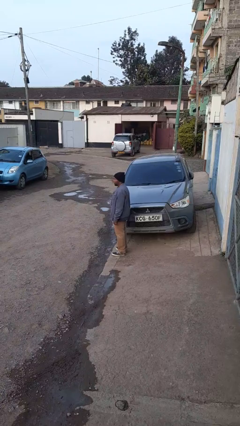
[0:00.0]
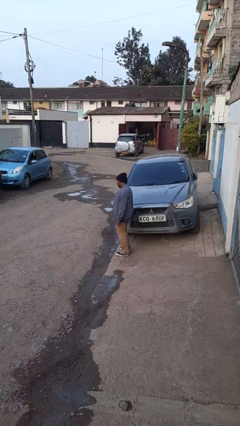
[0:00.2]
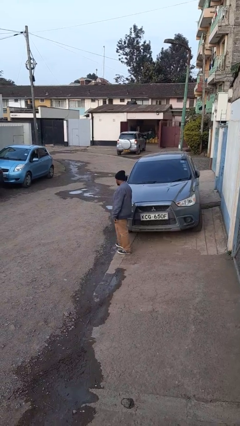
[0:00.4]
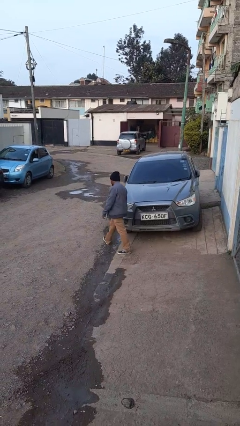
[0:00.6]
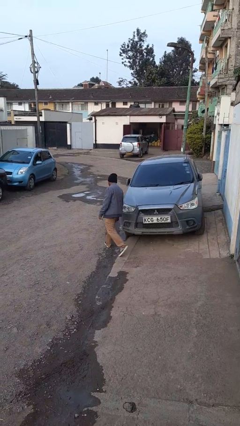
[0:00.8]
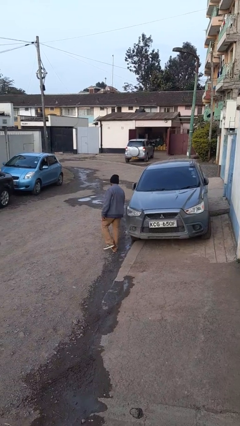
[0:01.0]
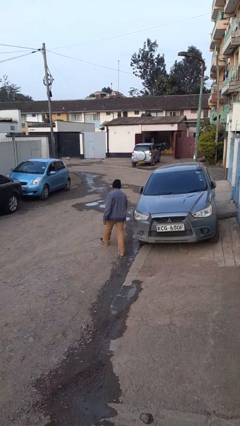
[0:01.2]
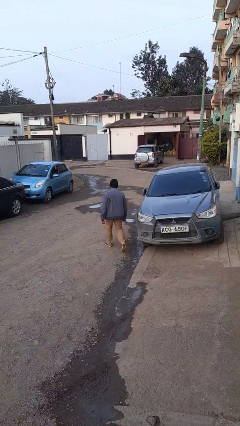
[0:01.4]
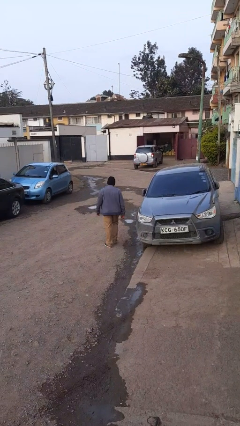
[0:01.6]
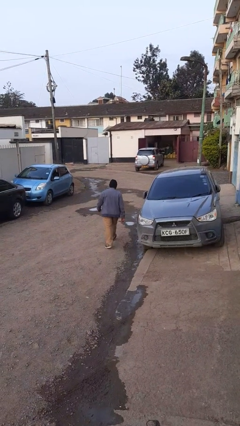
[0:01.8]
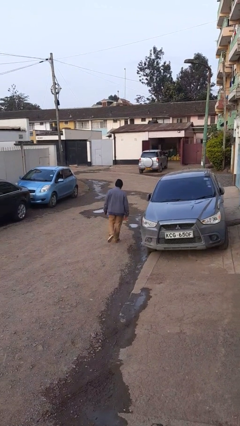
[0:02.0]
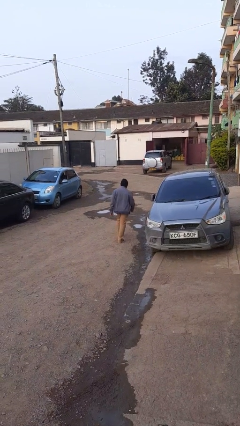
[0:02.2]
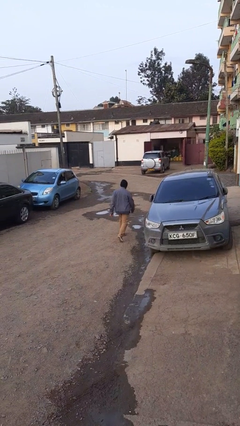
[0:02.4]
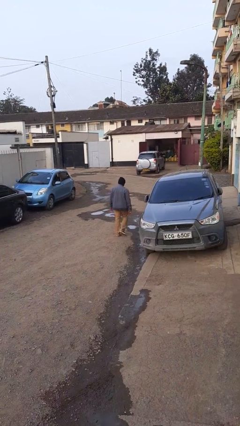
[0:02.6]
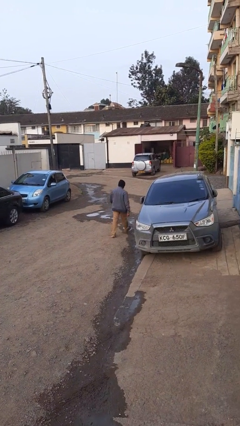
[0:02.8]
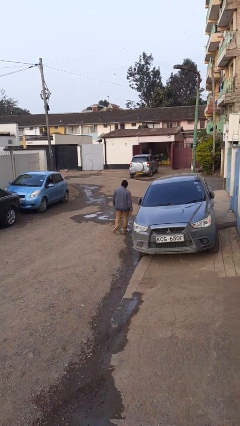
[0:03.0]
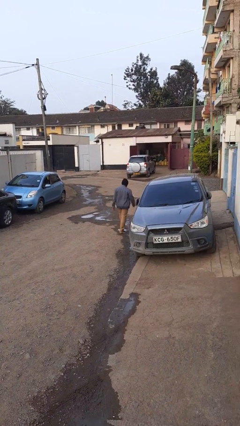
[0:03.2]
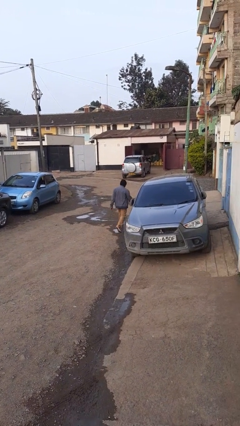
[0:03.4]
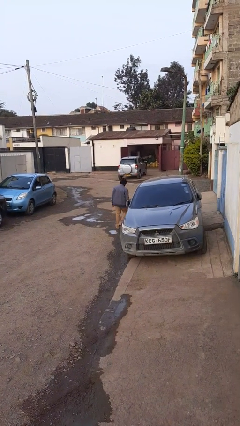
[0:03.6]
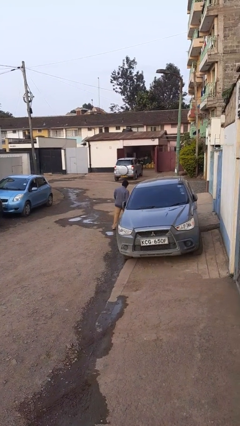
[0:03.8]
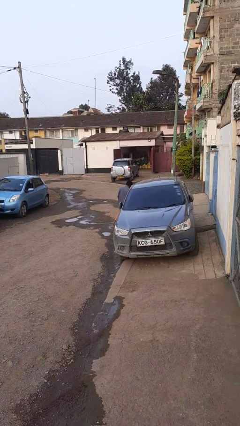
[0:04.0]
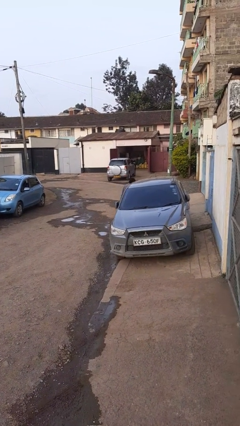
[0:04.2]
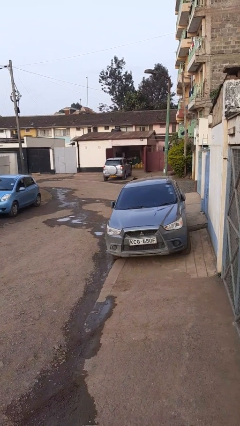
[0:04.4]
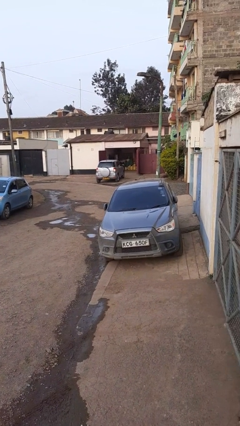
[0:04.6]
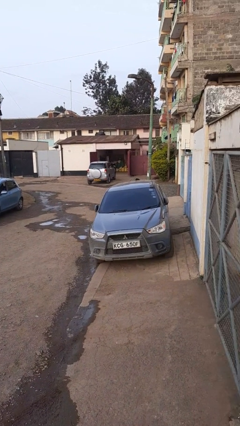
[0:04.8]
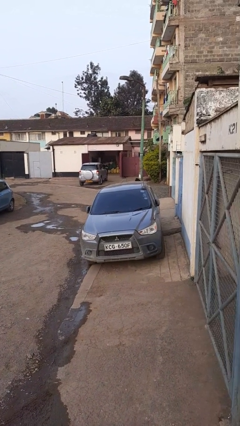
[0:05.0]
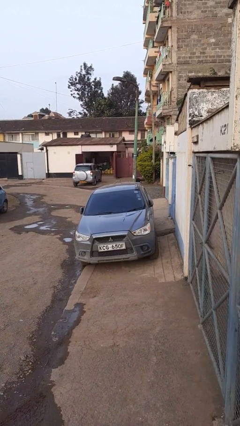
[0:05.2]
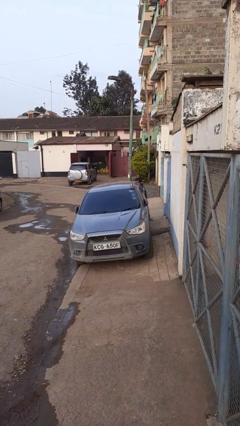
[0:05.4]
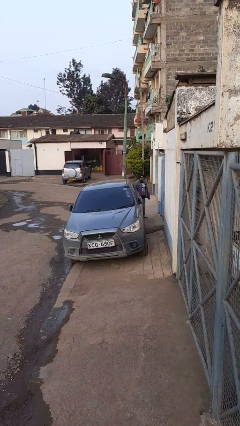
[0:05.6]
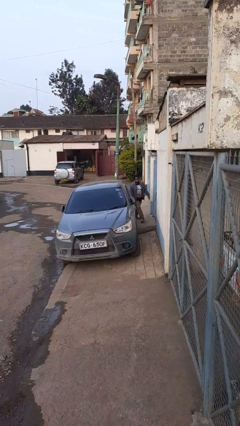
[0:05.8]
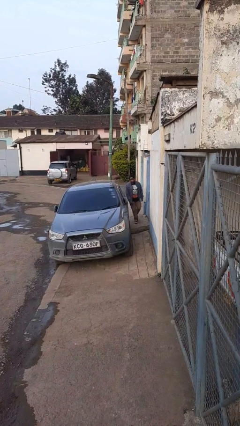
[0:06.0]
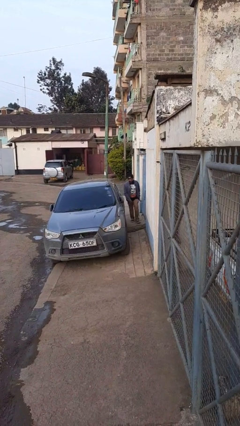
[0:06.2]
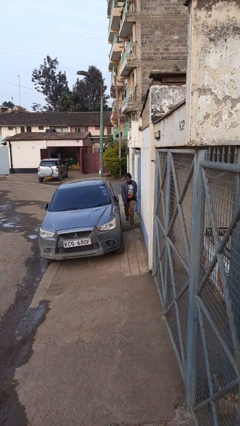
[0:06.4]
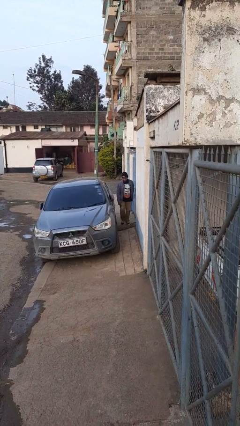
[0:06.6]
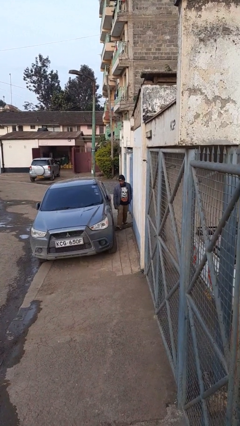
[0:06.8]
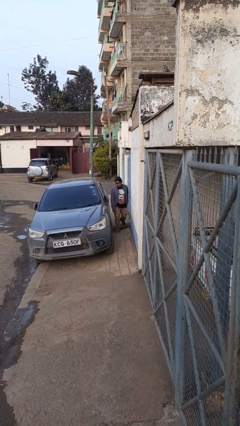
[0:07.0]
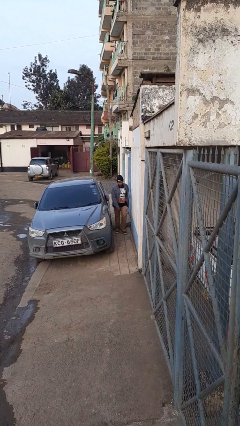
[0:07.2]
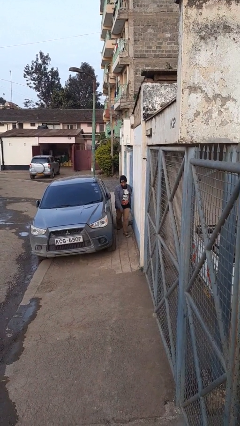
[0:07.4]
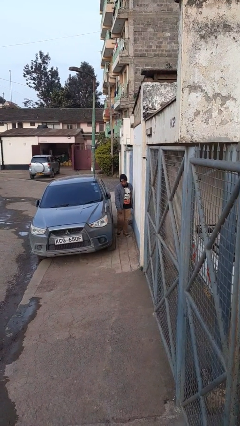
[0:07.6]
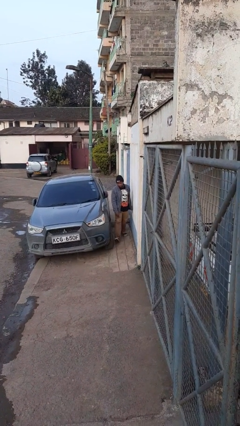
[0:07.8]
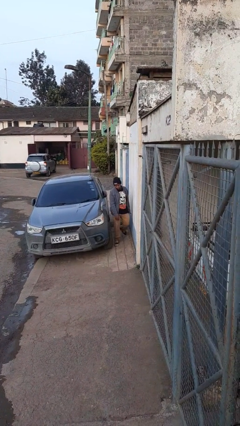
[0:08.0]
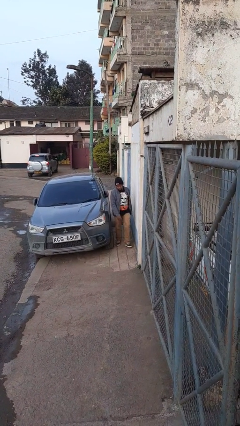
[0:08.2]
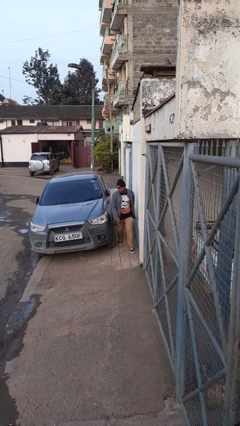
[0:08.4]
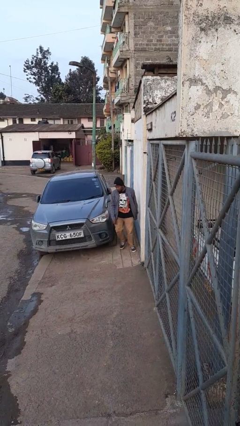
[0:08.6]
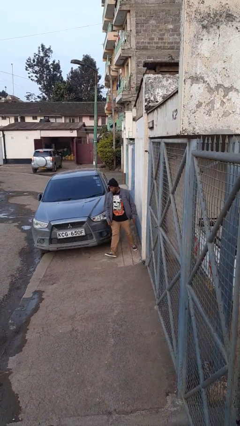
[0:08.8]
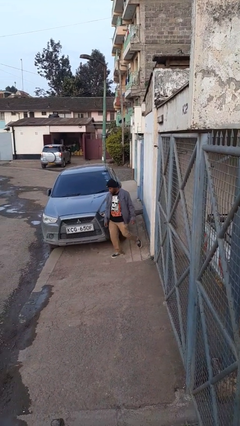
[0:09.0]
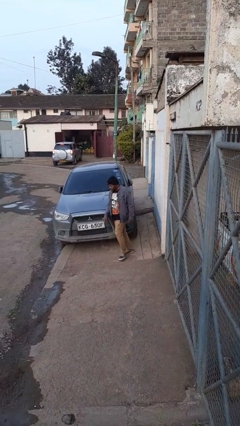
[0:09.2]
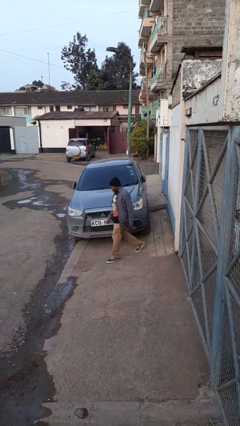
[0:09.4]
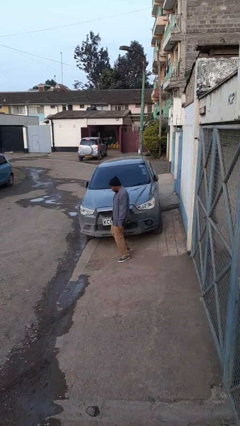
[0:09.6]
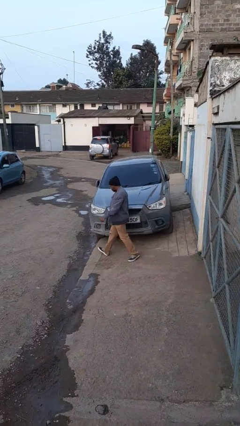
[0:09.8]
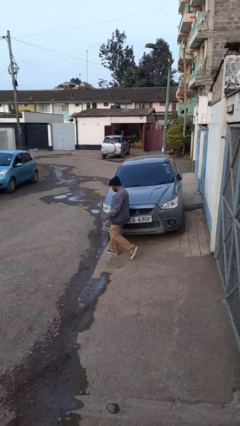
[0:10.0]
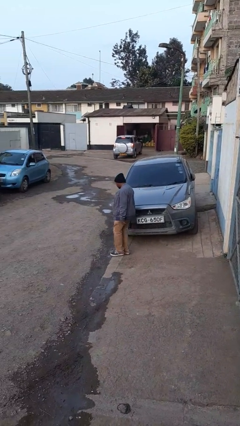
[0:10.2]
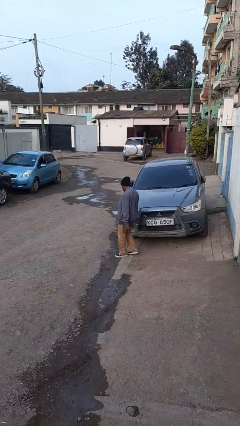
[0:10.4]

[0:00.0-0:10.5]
person walks around car

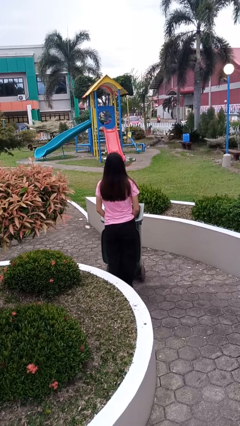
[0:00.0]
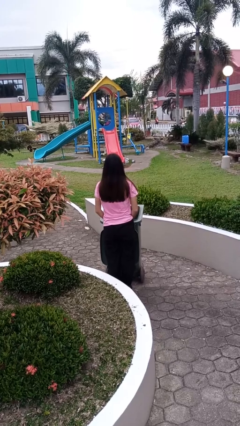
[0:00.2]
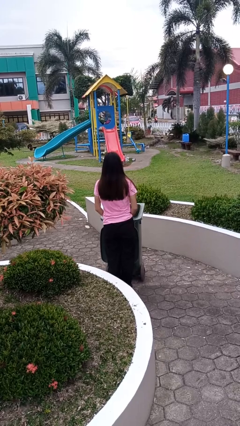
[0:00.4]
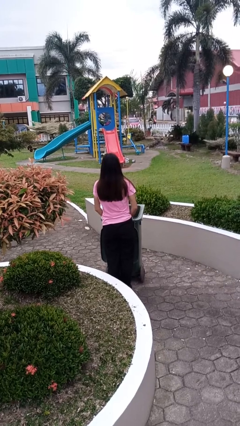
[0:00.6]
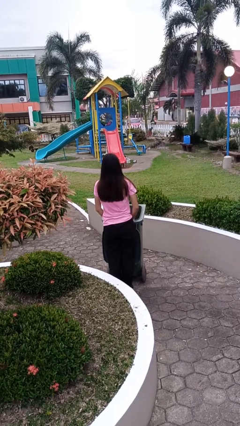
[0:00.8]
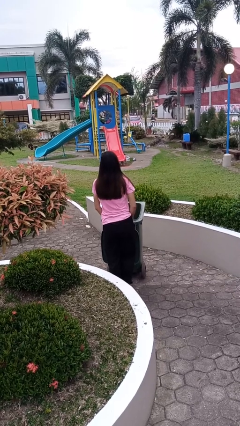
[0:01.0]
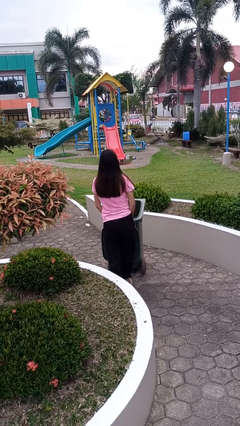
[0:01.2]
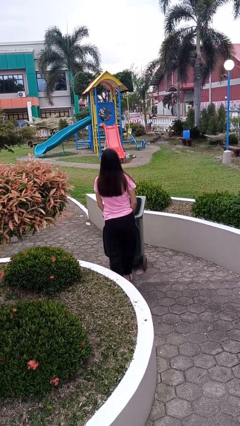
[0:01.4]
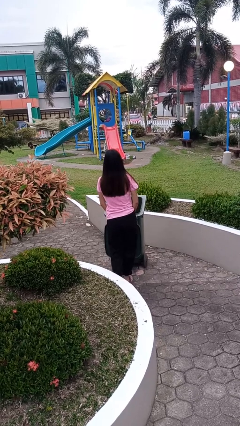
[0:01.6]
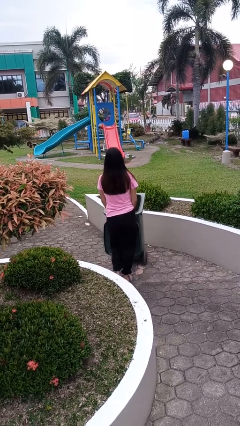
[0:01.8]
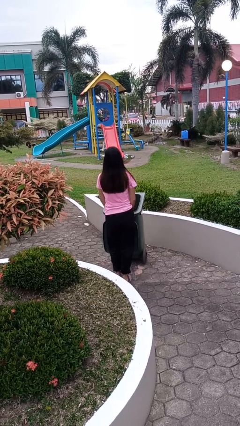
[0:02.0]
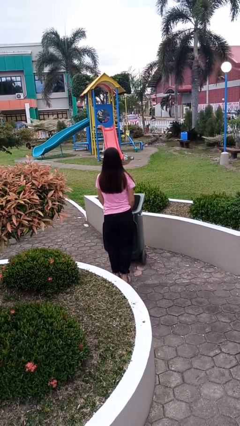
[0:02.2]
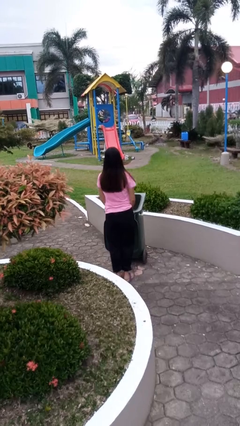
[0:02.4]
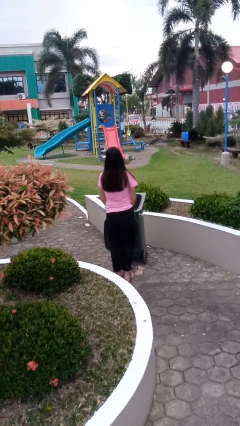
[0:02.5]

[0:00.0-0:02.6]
person pushes wheeled trashcan

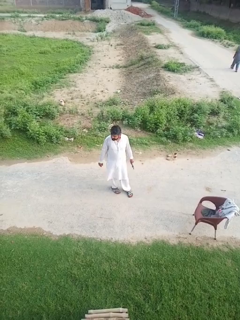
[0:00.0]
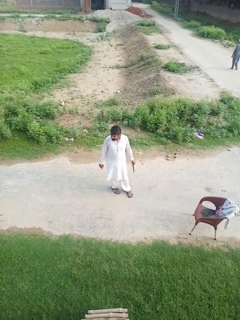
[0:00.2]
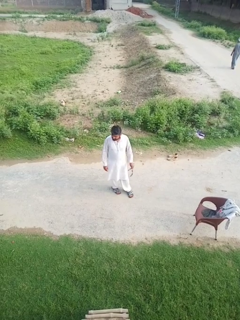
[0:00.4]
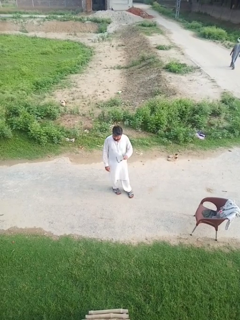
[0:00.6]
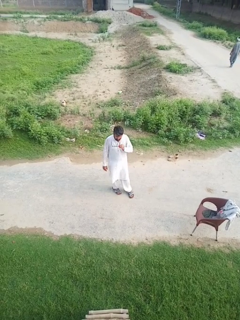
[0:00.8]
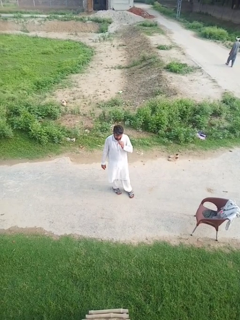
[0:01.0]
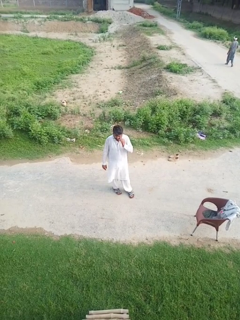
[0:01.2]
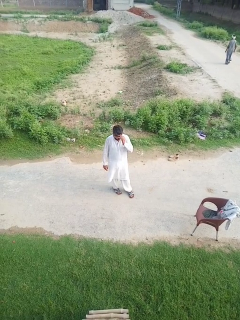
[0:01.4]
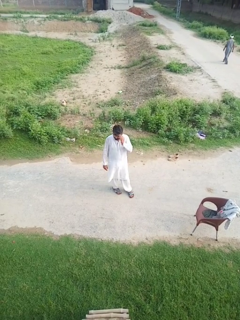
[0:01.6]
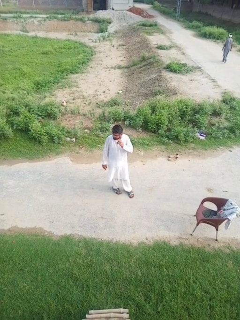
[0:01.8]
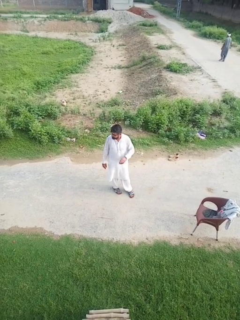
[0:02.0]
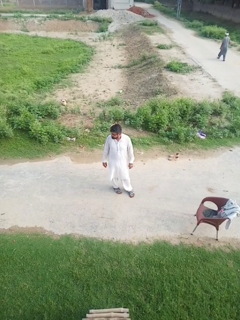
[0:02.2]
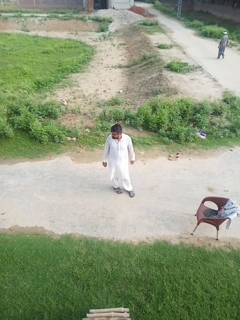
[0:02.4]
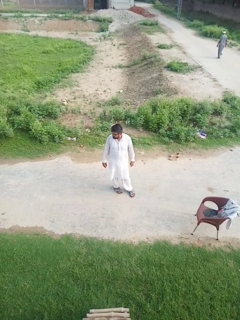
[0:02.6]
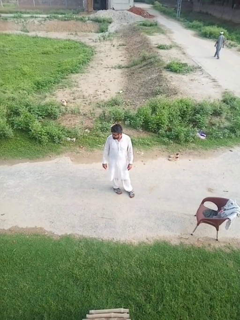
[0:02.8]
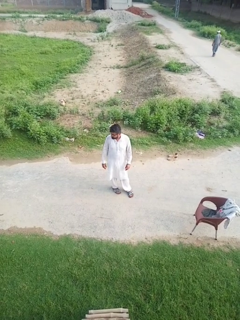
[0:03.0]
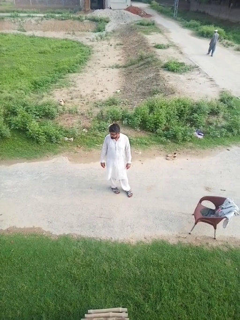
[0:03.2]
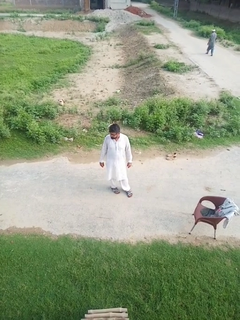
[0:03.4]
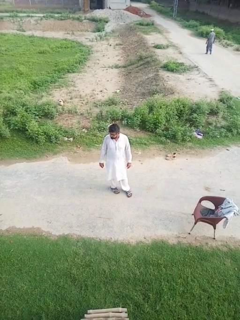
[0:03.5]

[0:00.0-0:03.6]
person puts on glasses

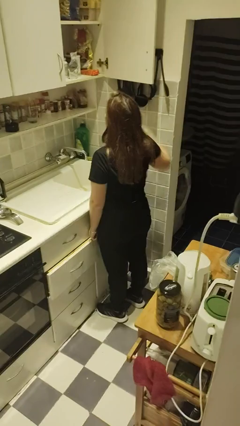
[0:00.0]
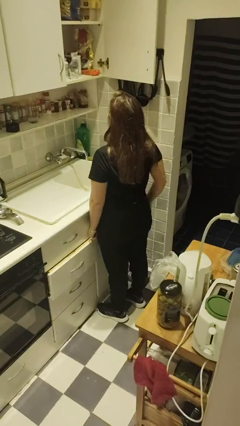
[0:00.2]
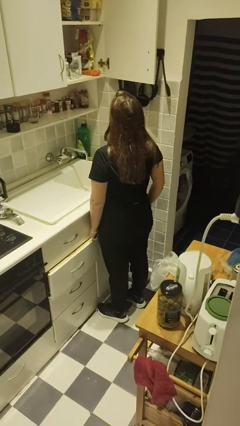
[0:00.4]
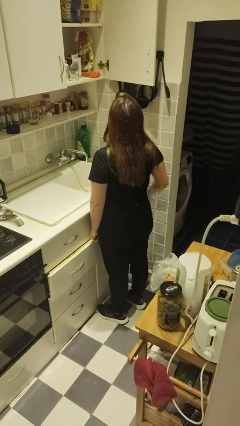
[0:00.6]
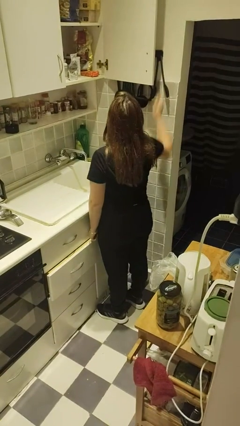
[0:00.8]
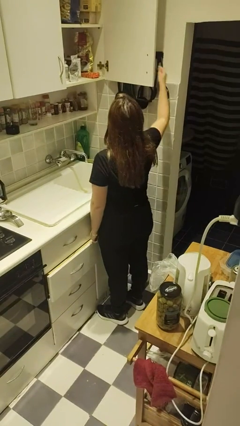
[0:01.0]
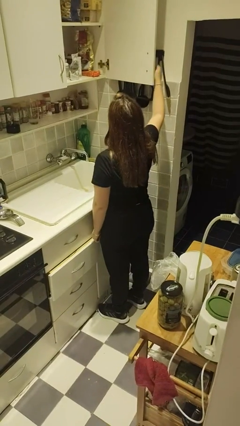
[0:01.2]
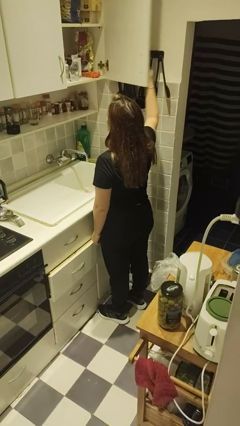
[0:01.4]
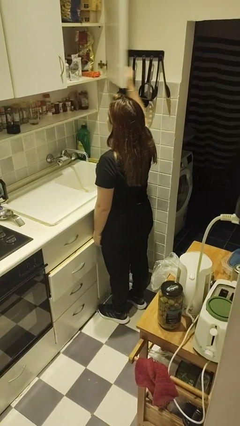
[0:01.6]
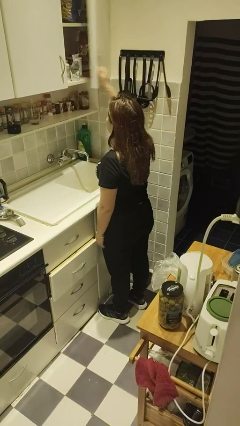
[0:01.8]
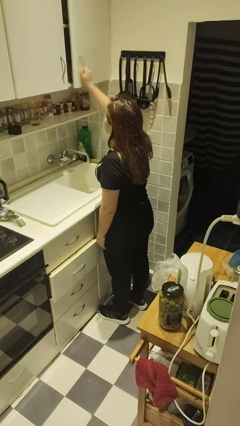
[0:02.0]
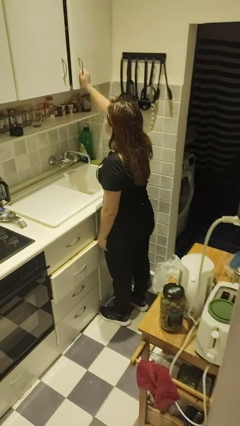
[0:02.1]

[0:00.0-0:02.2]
person closes cabinet
